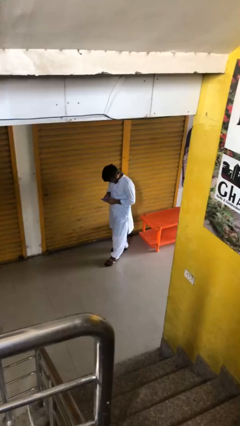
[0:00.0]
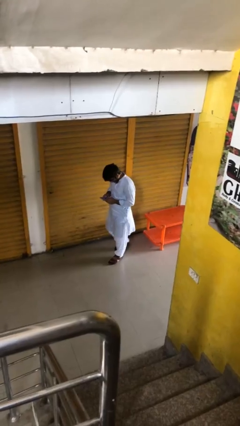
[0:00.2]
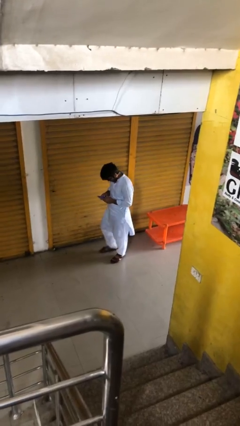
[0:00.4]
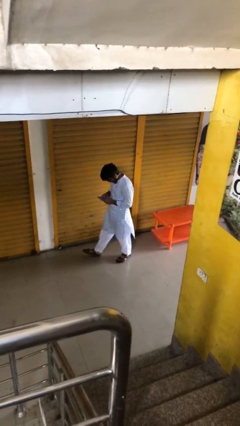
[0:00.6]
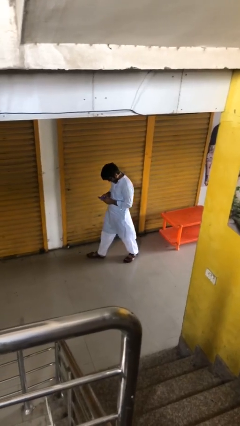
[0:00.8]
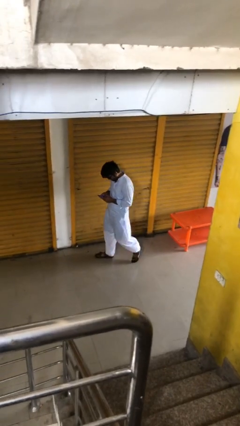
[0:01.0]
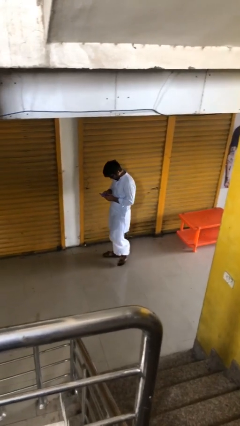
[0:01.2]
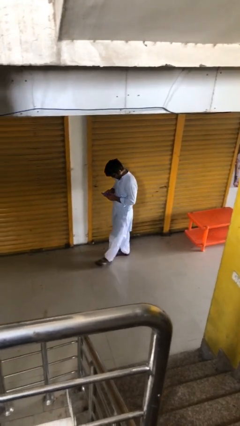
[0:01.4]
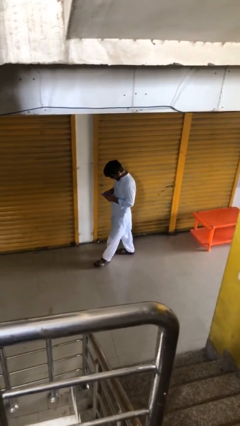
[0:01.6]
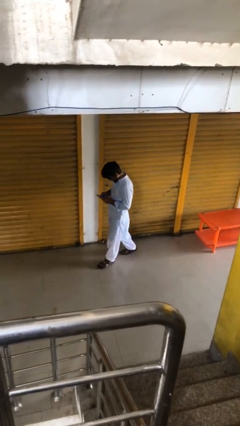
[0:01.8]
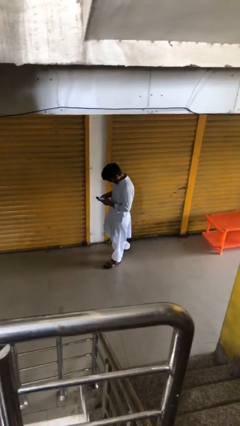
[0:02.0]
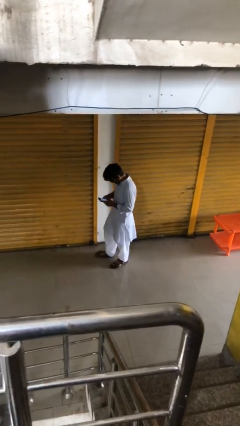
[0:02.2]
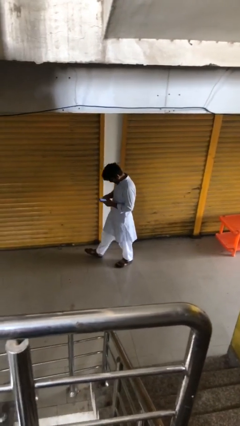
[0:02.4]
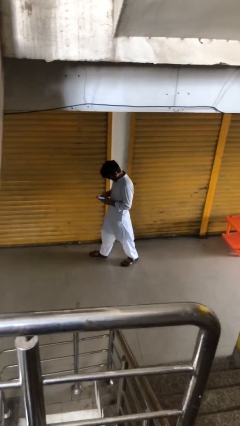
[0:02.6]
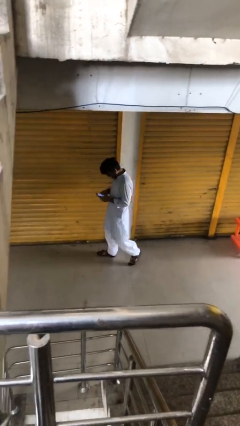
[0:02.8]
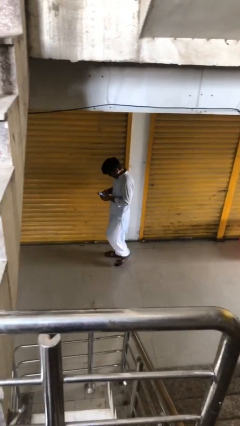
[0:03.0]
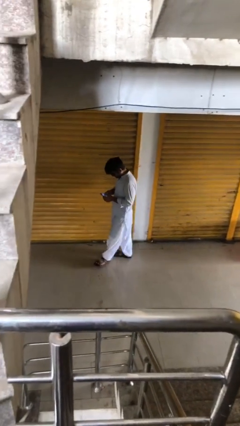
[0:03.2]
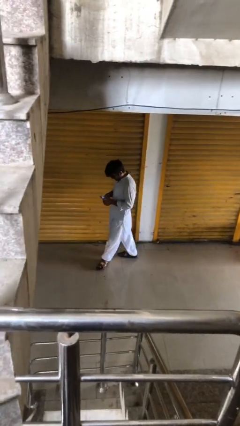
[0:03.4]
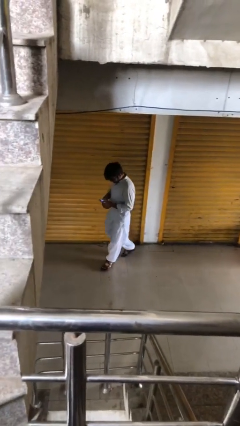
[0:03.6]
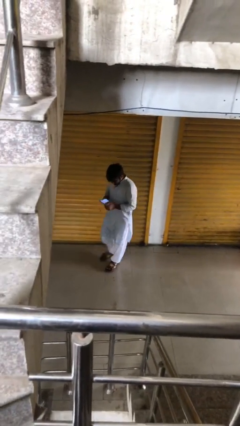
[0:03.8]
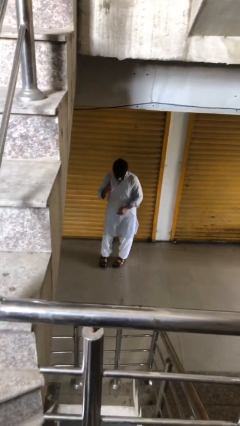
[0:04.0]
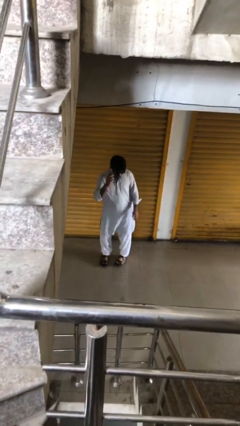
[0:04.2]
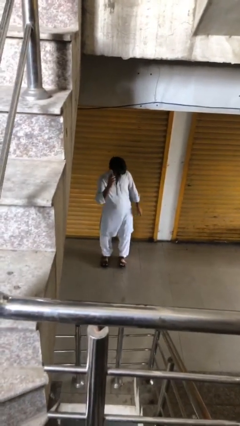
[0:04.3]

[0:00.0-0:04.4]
person texts on phone

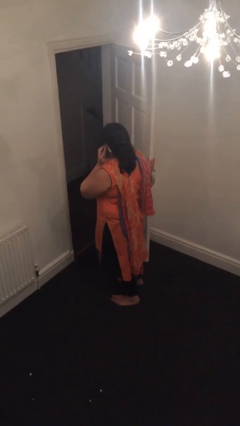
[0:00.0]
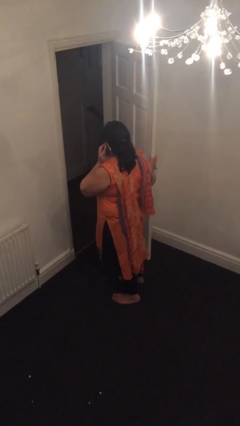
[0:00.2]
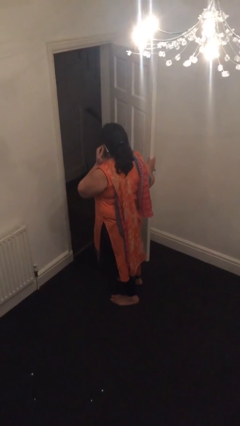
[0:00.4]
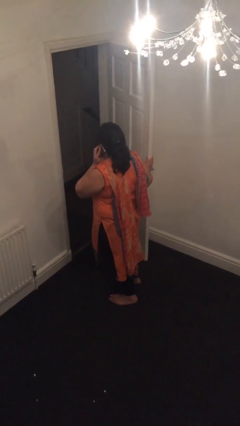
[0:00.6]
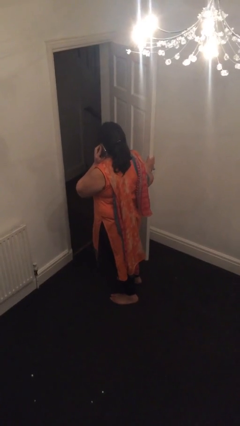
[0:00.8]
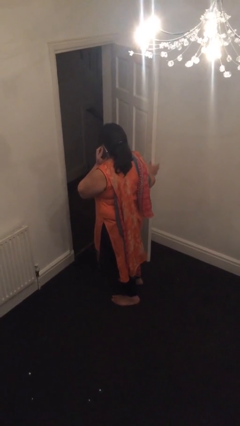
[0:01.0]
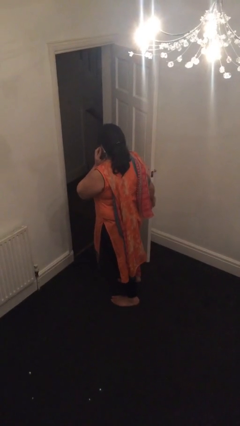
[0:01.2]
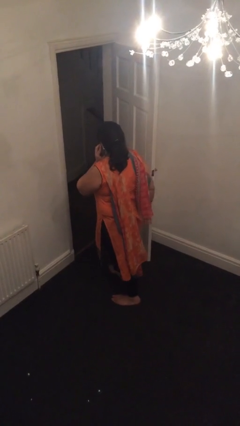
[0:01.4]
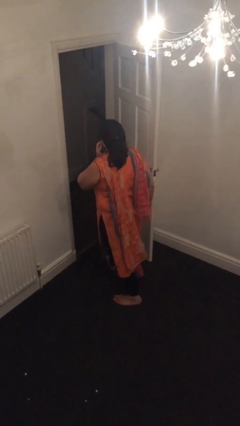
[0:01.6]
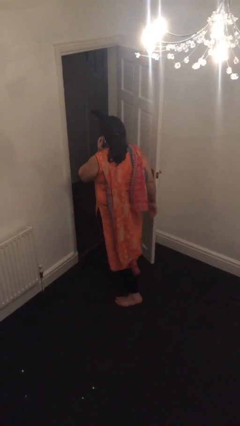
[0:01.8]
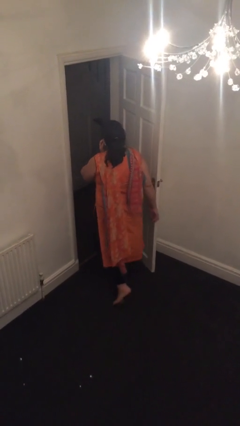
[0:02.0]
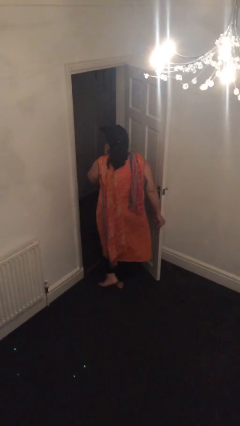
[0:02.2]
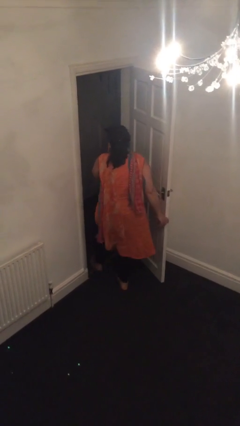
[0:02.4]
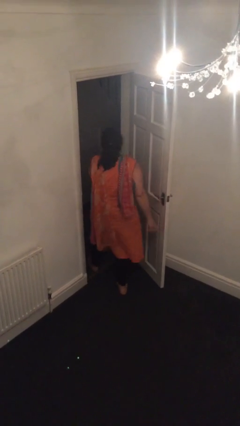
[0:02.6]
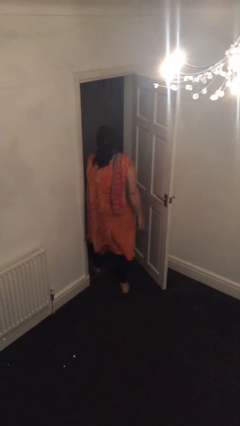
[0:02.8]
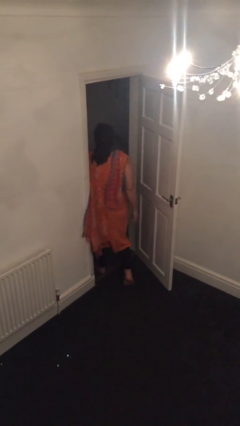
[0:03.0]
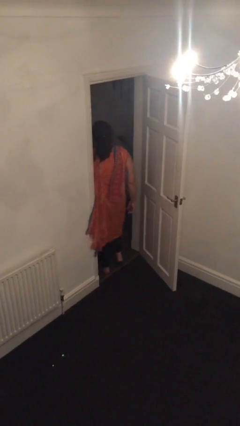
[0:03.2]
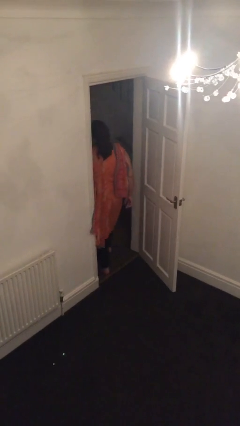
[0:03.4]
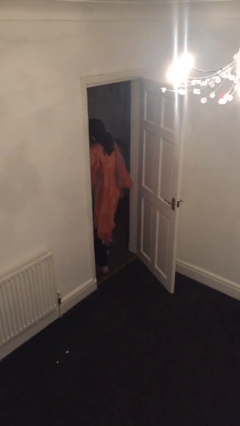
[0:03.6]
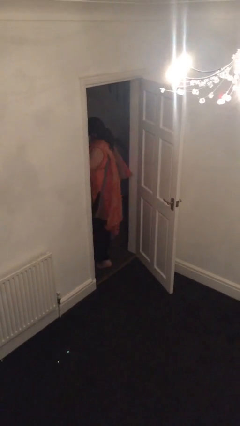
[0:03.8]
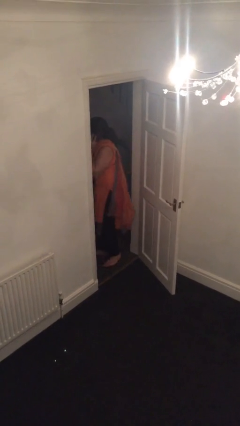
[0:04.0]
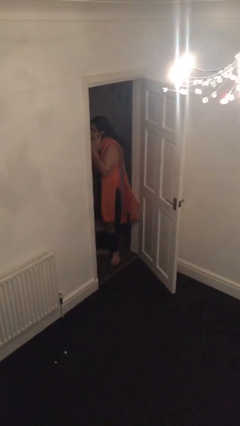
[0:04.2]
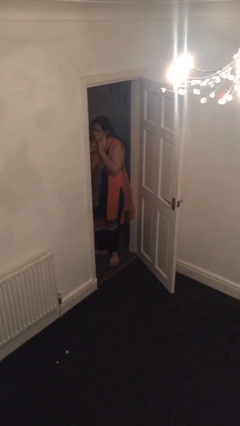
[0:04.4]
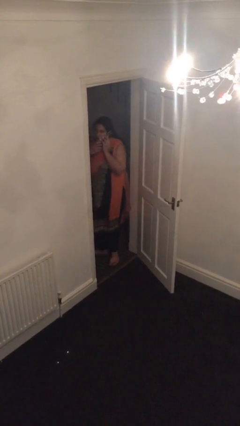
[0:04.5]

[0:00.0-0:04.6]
person exits scene through structure

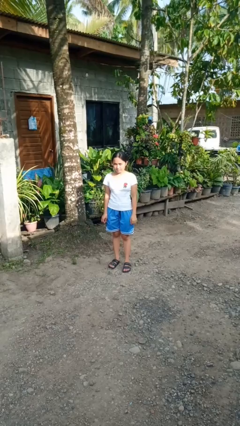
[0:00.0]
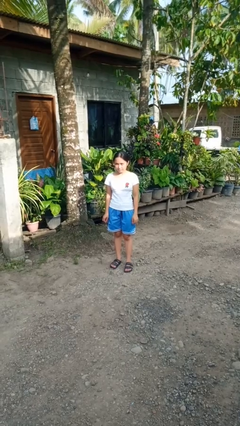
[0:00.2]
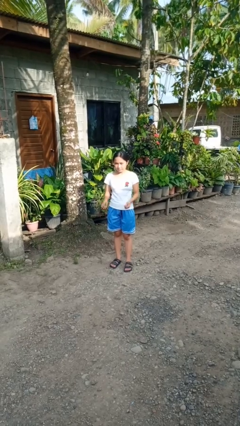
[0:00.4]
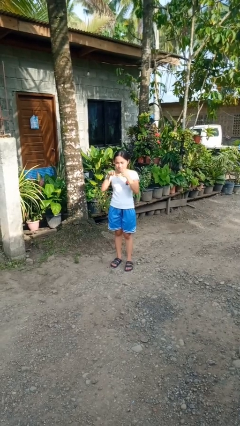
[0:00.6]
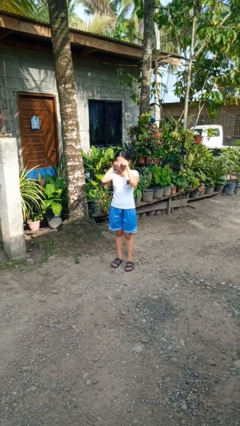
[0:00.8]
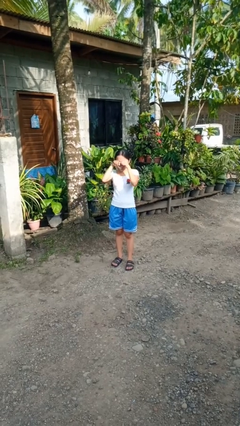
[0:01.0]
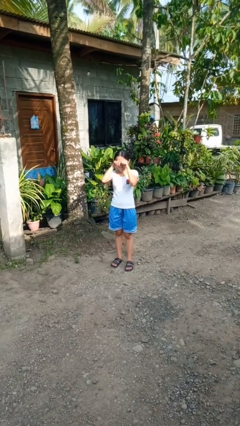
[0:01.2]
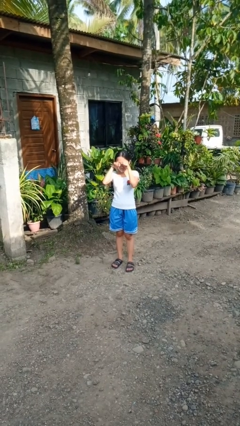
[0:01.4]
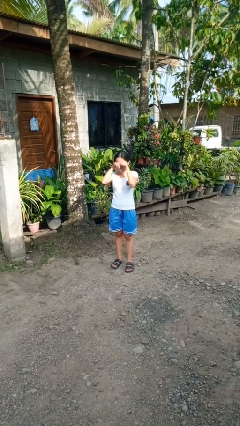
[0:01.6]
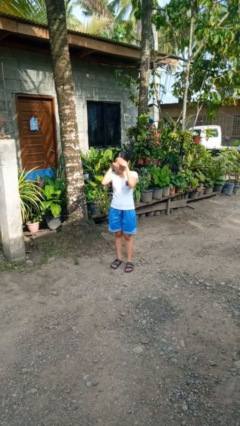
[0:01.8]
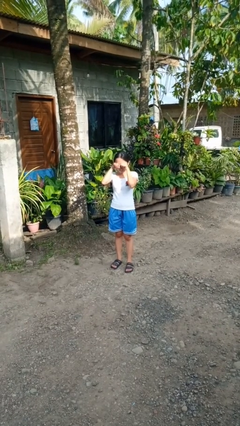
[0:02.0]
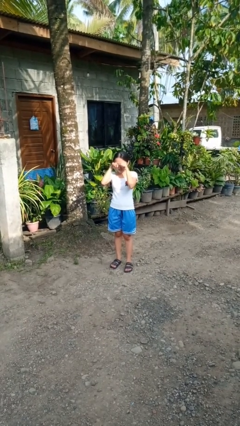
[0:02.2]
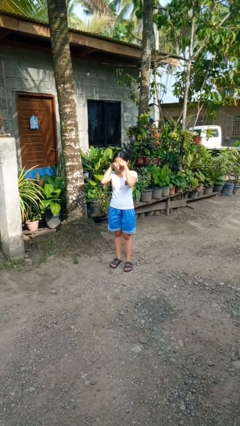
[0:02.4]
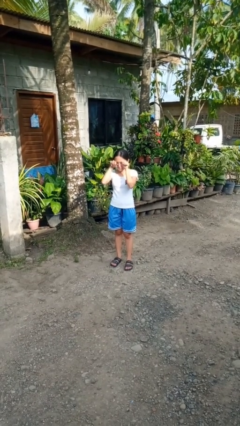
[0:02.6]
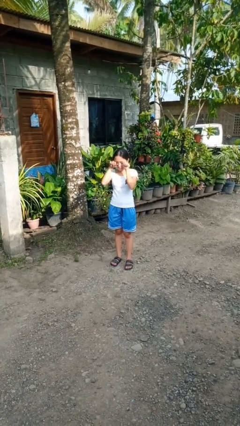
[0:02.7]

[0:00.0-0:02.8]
person rubs eyes

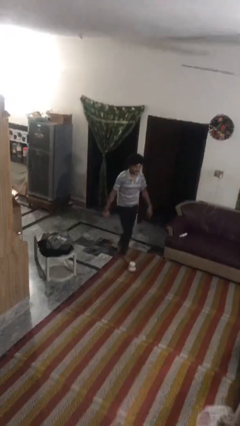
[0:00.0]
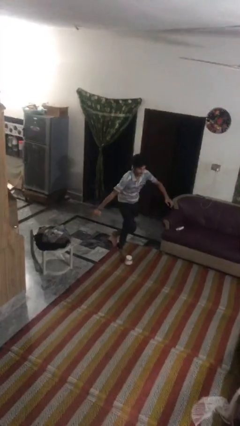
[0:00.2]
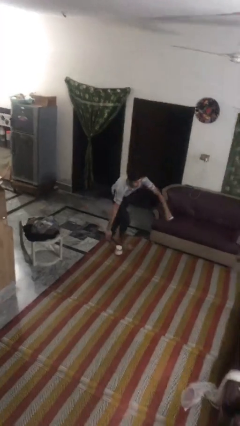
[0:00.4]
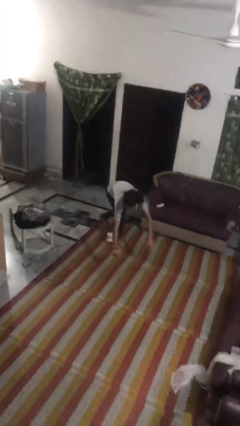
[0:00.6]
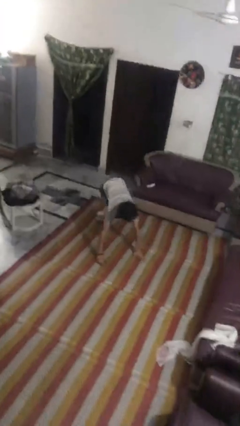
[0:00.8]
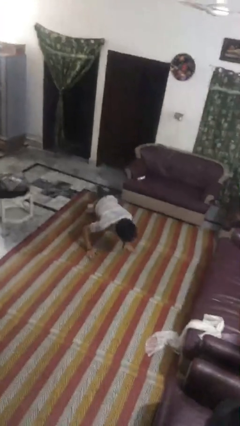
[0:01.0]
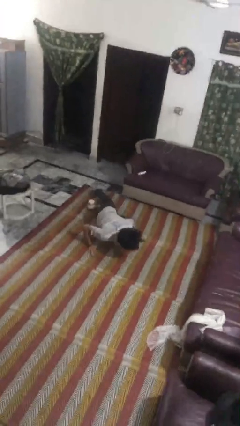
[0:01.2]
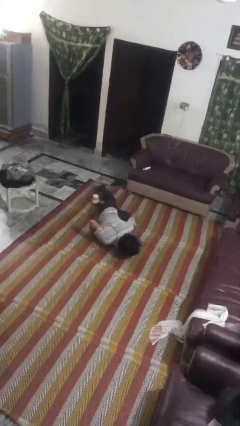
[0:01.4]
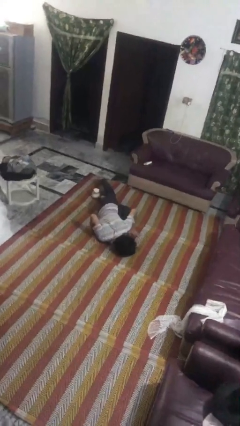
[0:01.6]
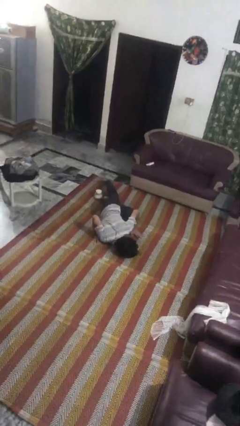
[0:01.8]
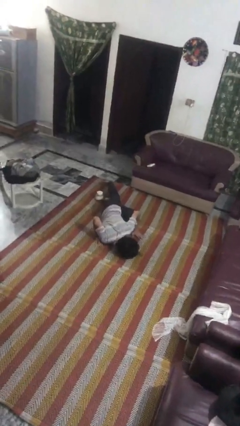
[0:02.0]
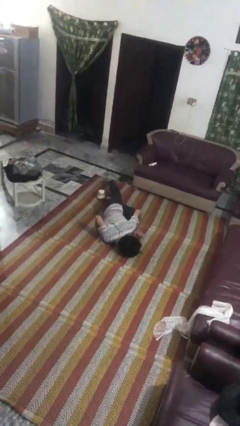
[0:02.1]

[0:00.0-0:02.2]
person trips on object on floor

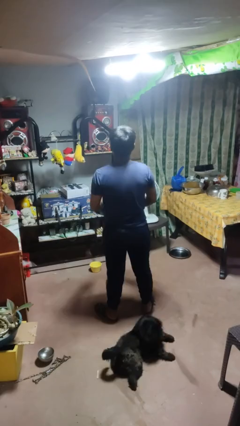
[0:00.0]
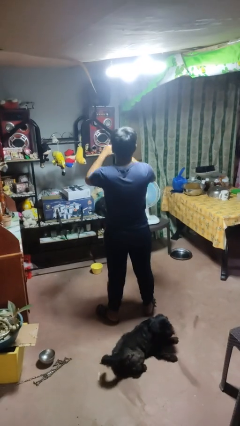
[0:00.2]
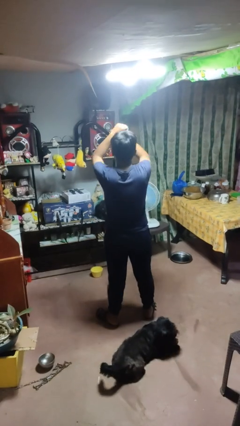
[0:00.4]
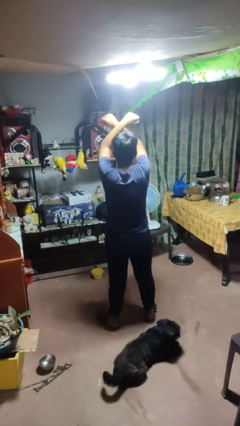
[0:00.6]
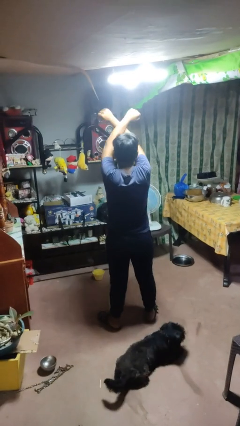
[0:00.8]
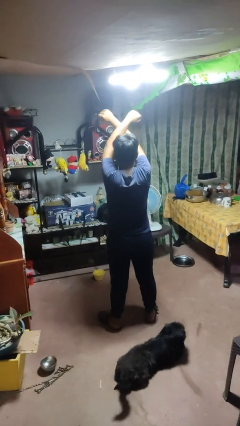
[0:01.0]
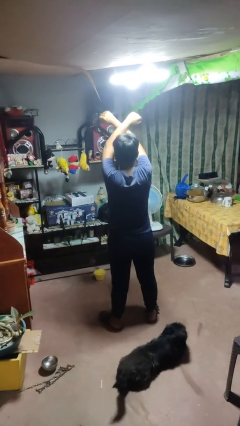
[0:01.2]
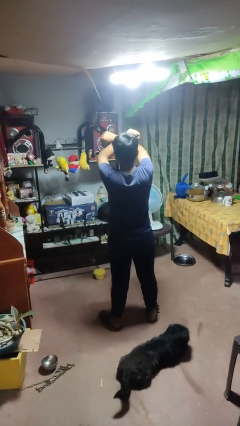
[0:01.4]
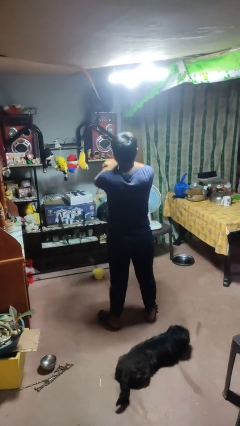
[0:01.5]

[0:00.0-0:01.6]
person gestures arms x

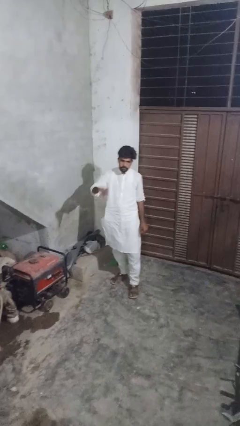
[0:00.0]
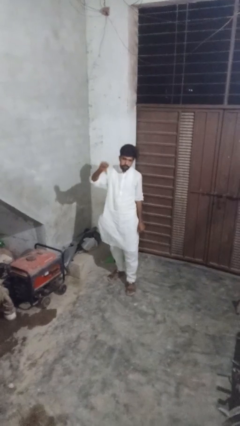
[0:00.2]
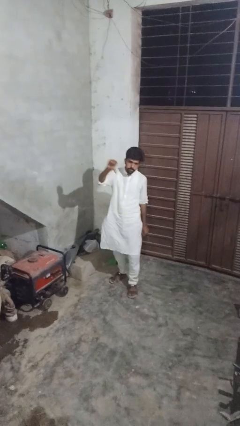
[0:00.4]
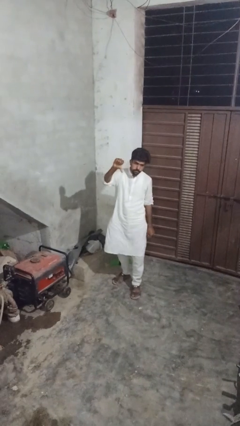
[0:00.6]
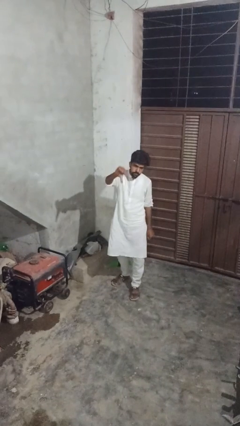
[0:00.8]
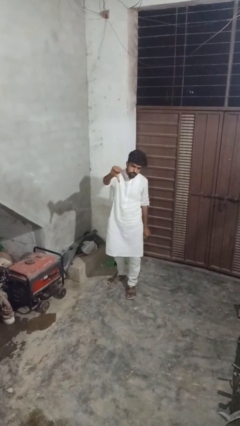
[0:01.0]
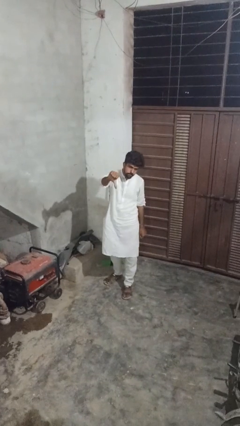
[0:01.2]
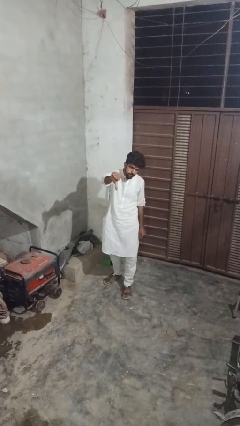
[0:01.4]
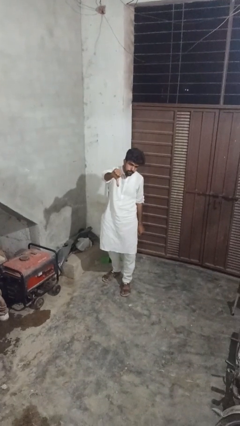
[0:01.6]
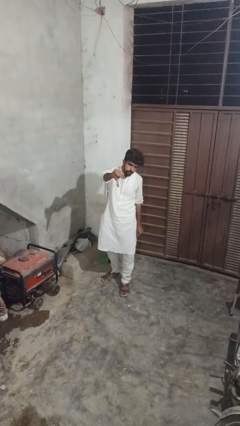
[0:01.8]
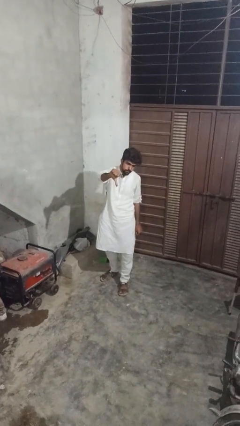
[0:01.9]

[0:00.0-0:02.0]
person gestures thumbs down
